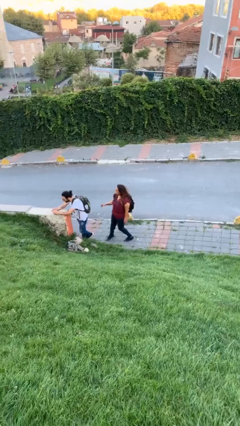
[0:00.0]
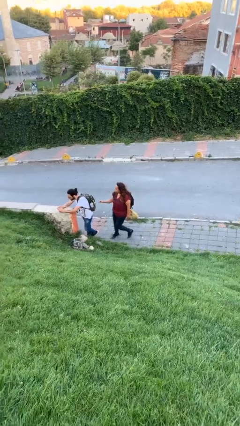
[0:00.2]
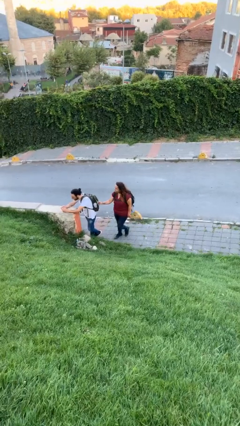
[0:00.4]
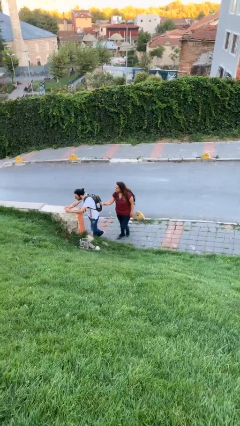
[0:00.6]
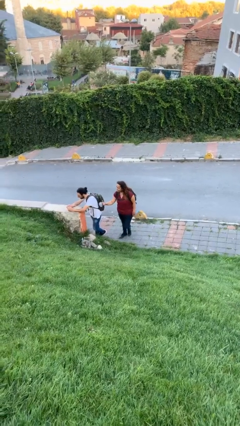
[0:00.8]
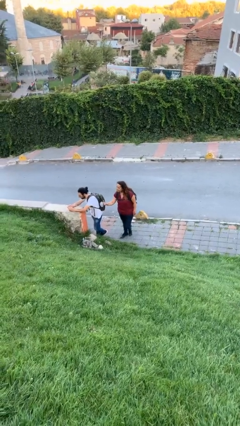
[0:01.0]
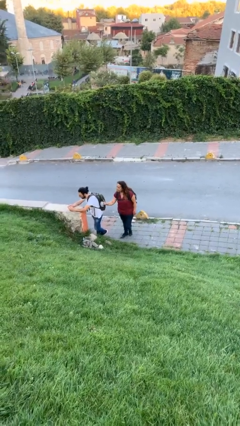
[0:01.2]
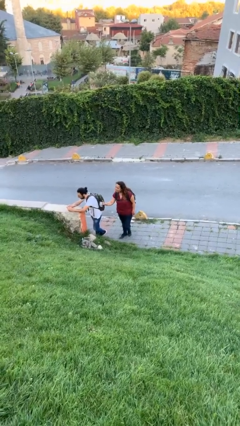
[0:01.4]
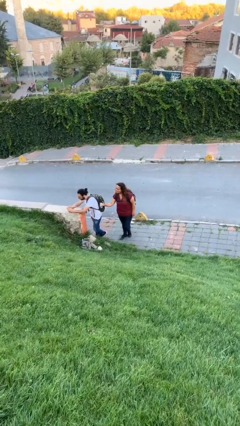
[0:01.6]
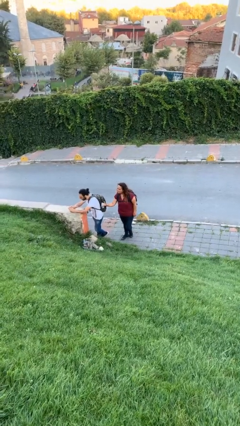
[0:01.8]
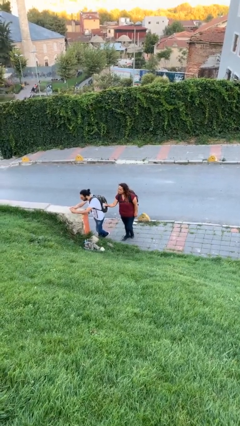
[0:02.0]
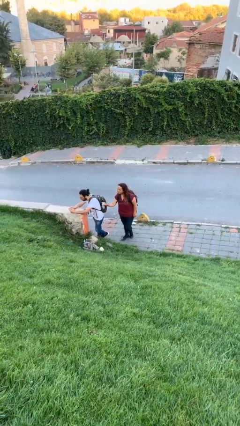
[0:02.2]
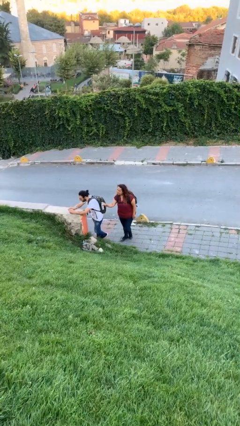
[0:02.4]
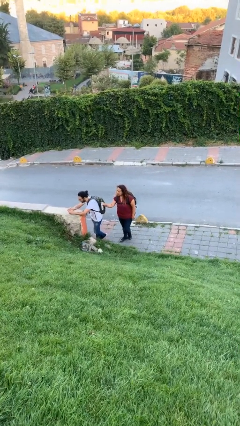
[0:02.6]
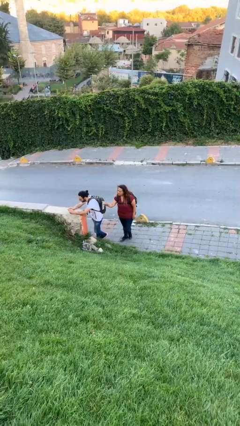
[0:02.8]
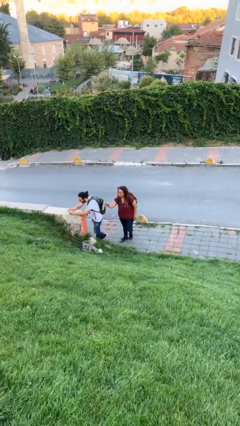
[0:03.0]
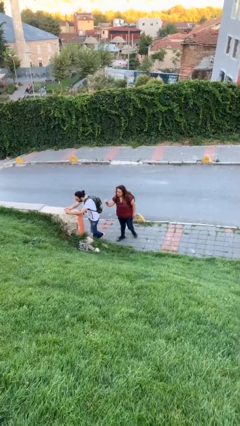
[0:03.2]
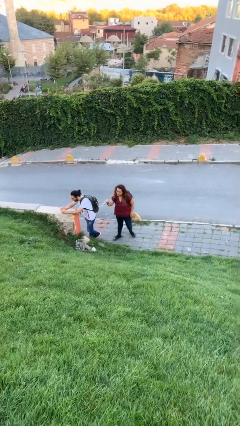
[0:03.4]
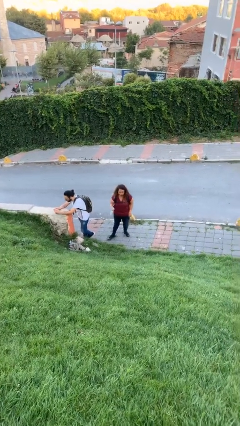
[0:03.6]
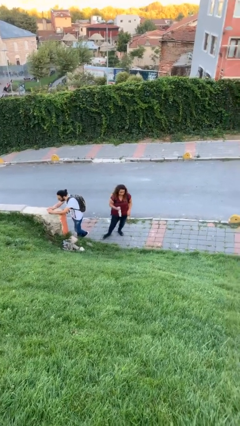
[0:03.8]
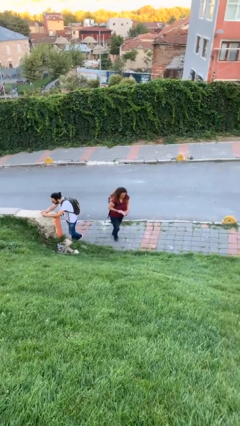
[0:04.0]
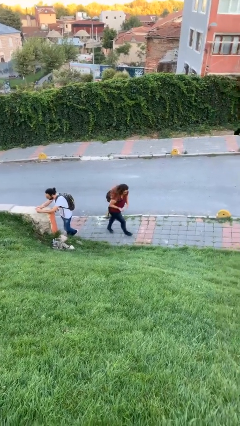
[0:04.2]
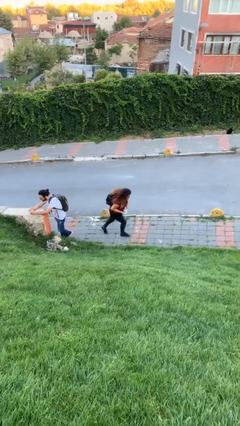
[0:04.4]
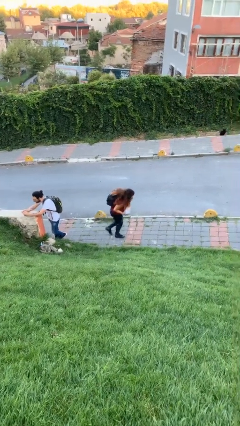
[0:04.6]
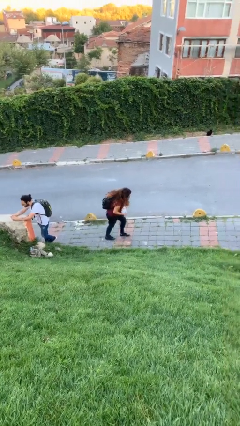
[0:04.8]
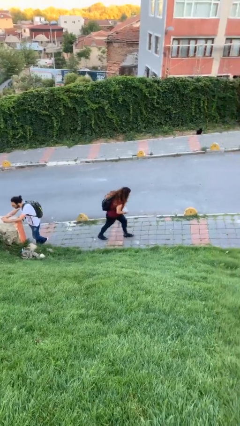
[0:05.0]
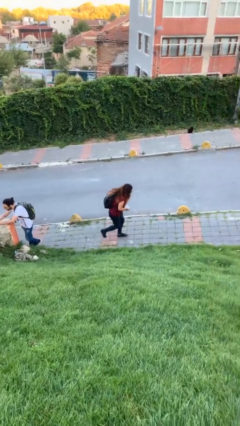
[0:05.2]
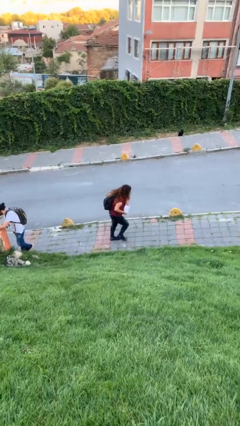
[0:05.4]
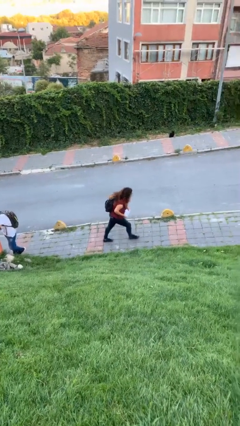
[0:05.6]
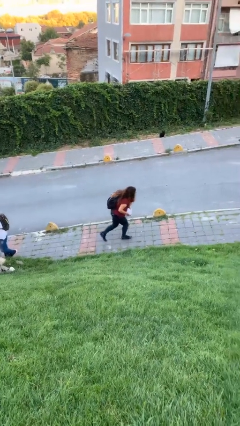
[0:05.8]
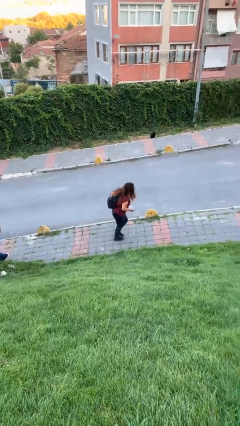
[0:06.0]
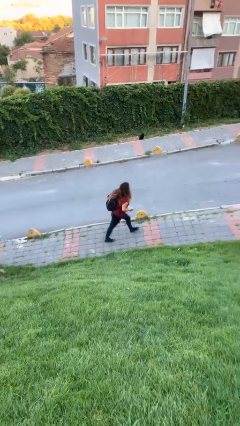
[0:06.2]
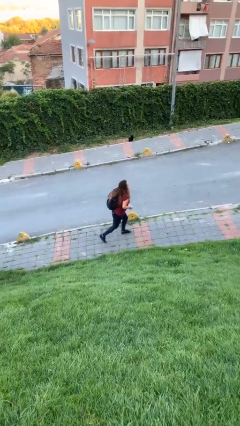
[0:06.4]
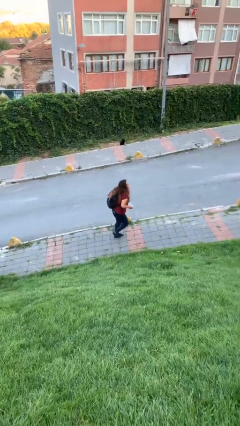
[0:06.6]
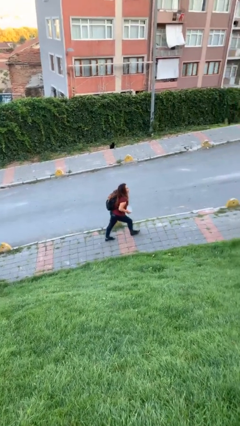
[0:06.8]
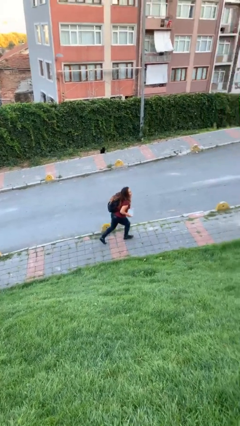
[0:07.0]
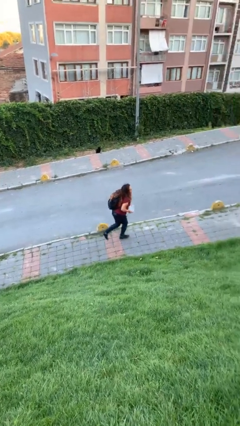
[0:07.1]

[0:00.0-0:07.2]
person steals object from person

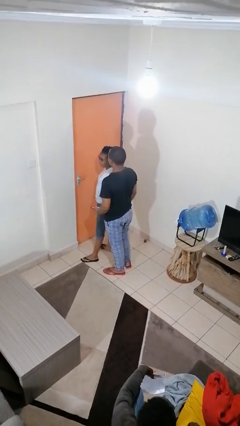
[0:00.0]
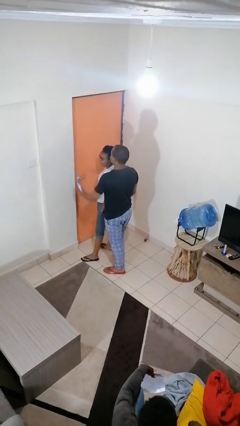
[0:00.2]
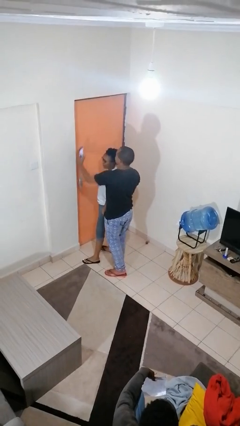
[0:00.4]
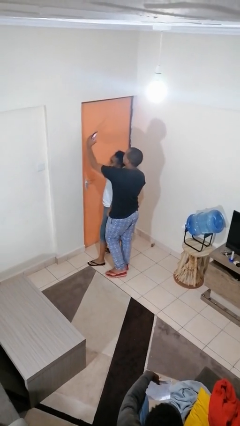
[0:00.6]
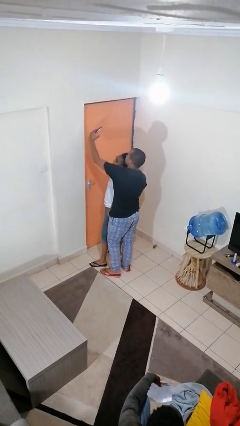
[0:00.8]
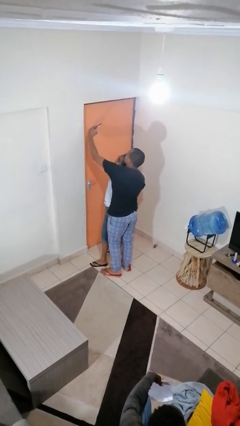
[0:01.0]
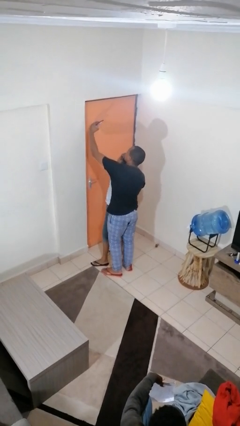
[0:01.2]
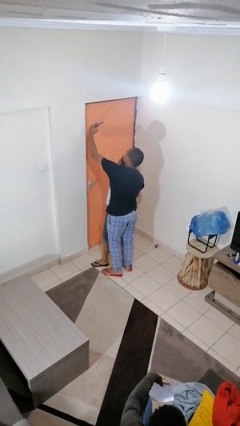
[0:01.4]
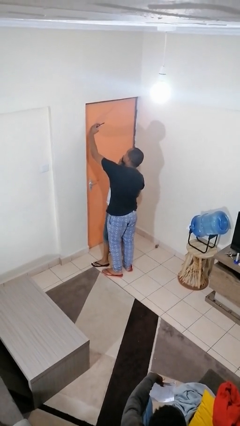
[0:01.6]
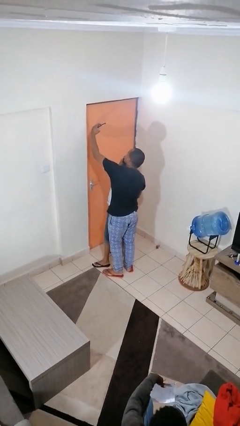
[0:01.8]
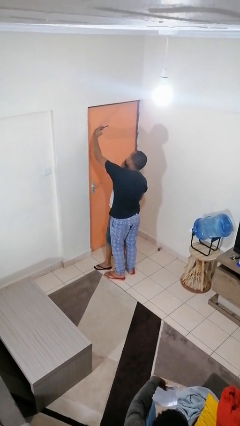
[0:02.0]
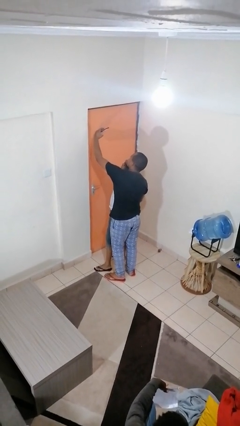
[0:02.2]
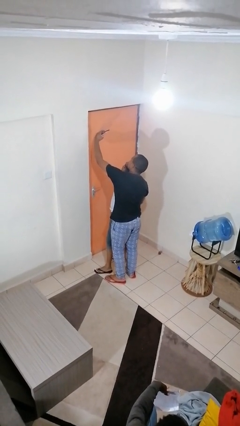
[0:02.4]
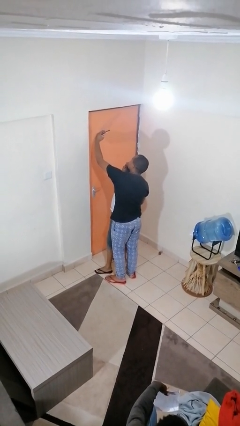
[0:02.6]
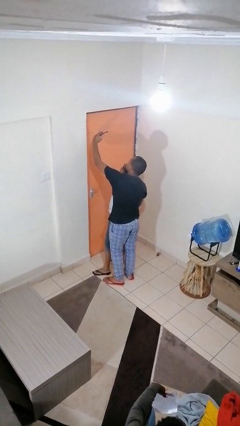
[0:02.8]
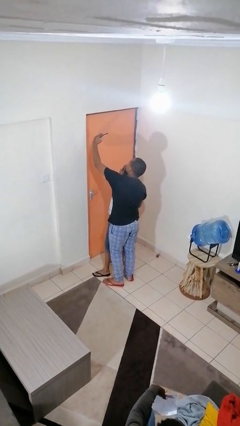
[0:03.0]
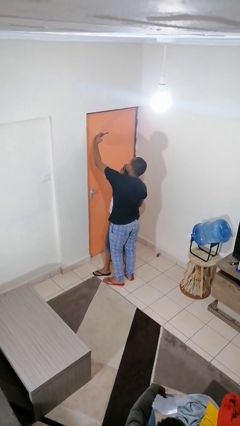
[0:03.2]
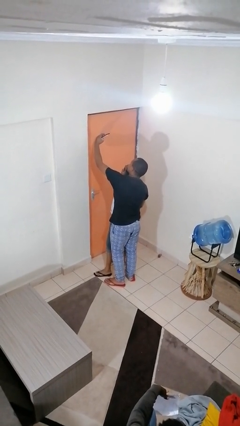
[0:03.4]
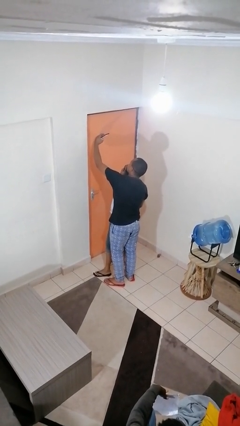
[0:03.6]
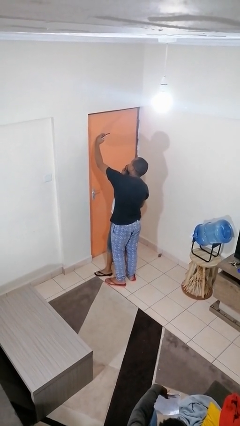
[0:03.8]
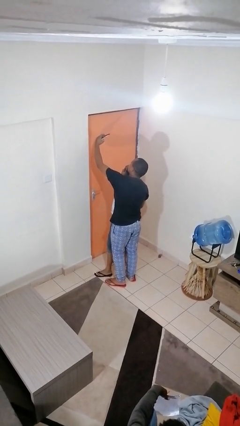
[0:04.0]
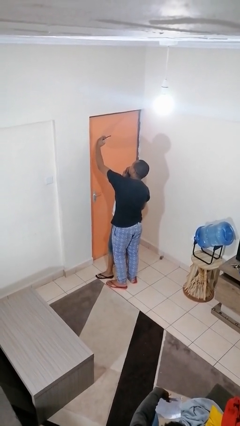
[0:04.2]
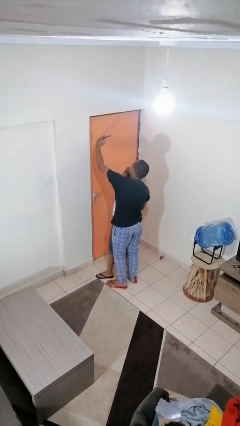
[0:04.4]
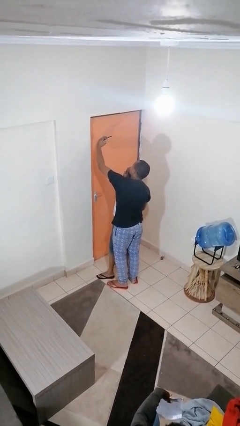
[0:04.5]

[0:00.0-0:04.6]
person takes selfie with person

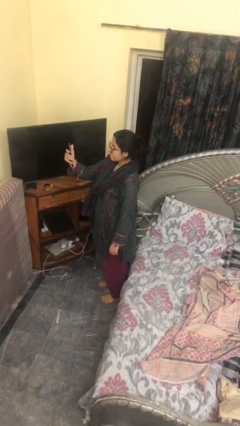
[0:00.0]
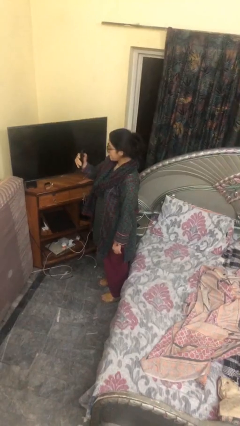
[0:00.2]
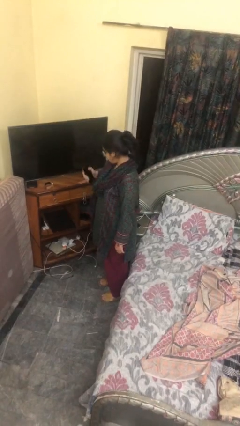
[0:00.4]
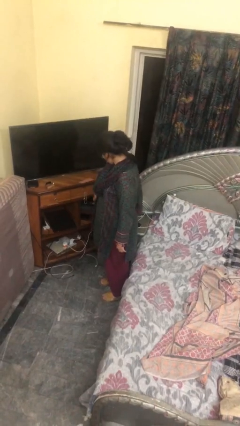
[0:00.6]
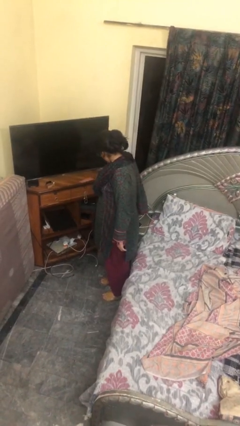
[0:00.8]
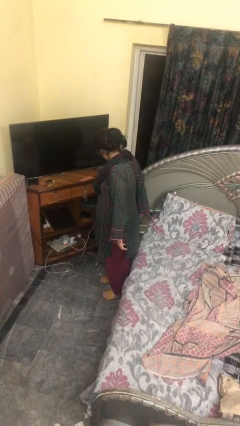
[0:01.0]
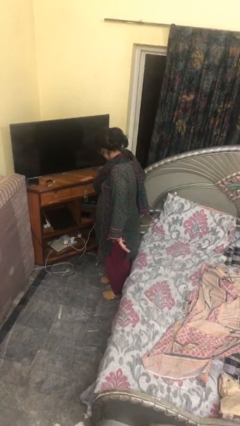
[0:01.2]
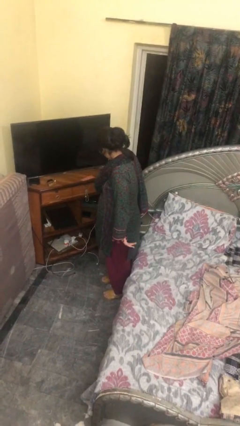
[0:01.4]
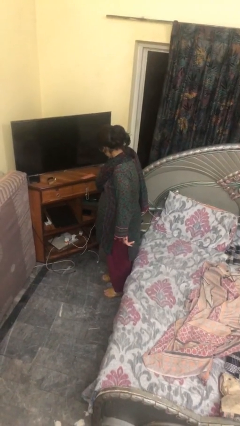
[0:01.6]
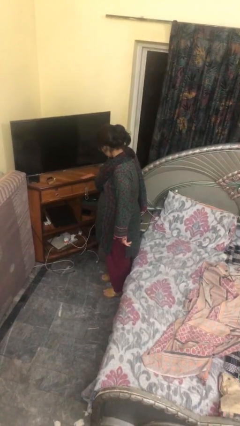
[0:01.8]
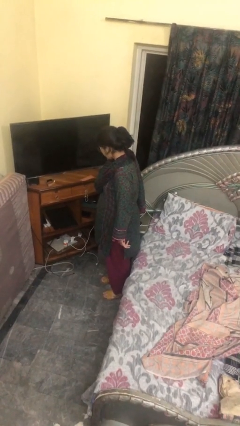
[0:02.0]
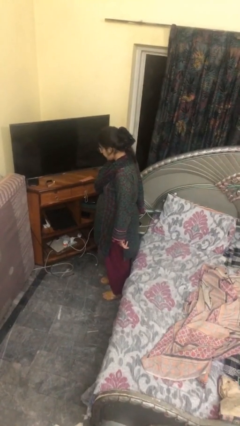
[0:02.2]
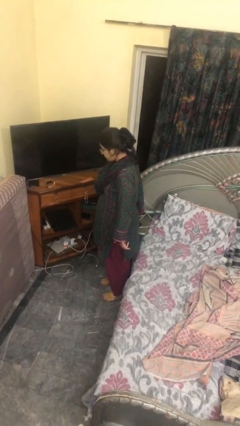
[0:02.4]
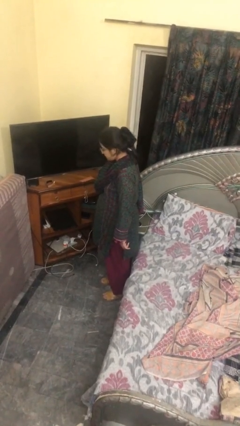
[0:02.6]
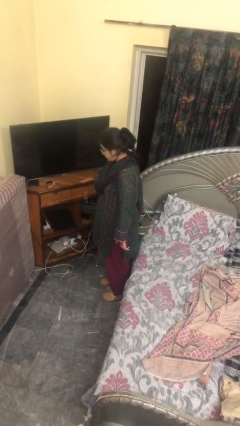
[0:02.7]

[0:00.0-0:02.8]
person puts phone into pocket

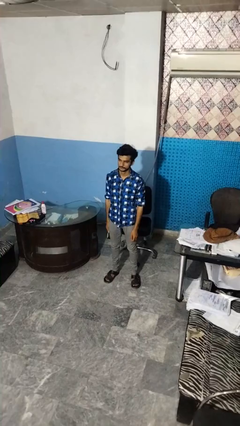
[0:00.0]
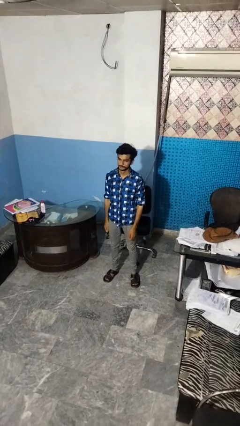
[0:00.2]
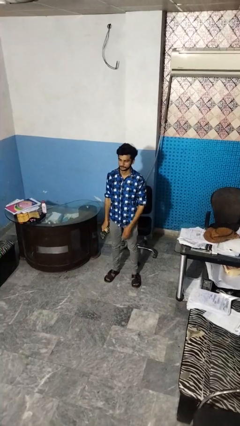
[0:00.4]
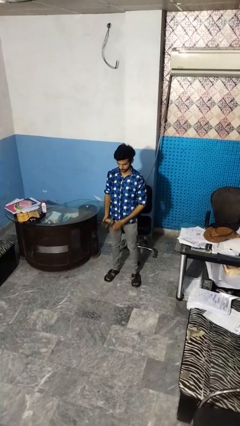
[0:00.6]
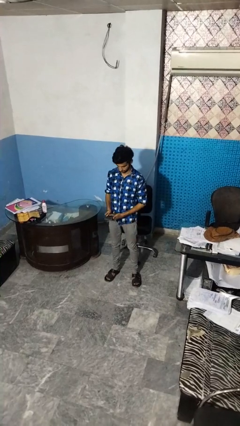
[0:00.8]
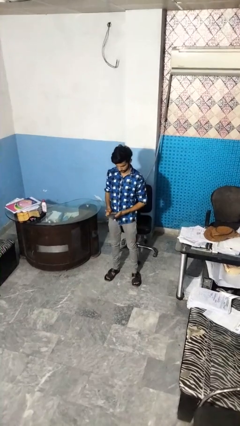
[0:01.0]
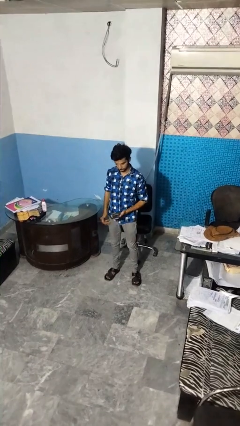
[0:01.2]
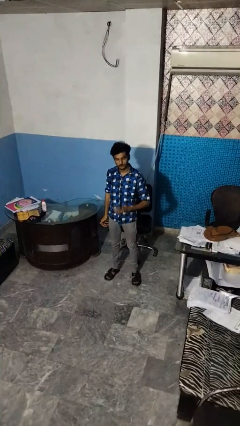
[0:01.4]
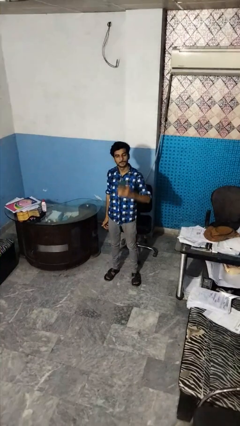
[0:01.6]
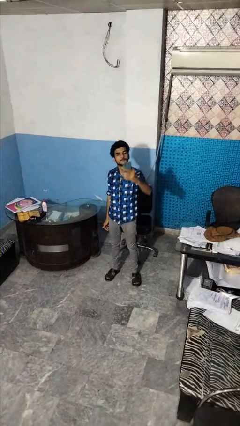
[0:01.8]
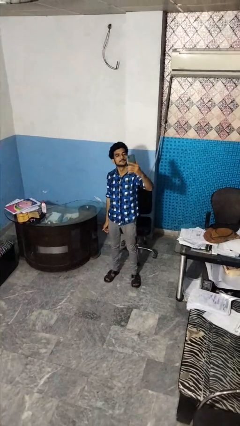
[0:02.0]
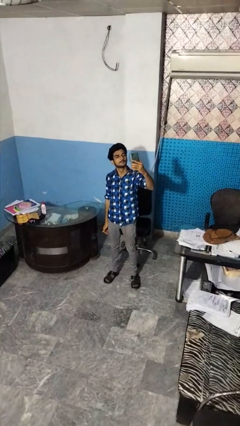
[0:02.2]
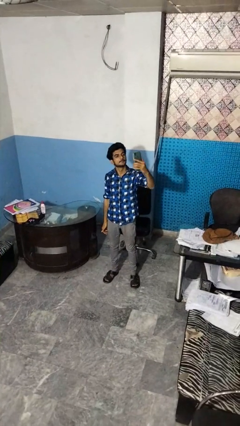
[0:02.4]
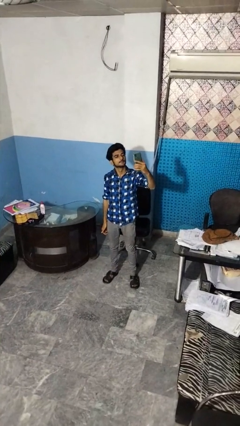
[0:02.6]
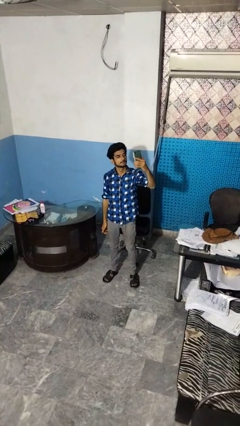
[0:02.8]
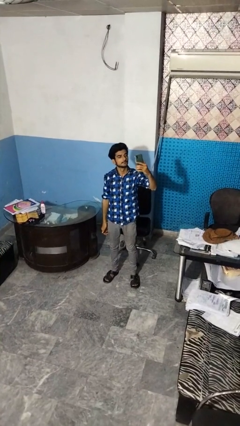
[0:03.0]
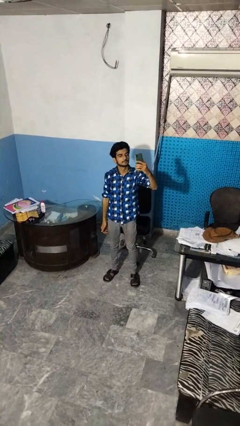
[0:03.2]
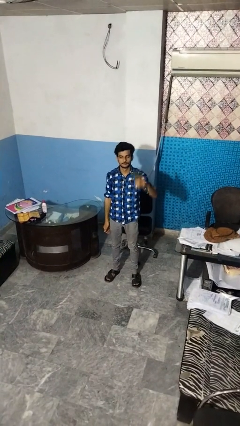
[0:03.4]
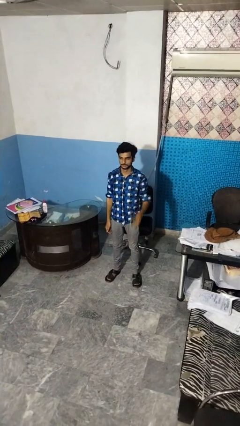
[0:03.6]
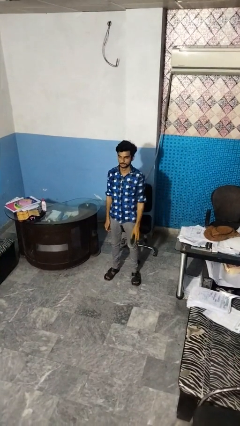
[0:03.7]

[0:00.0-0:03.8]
person takes selfie
